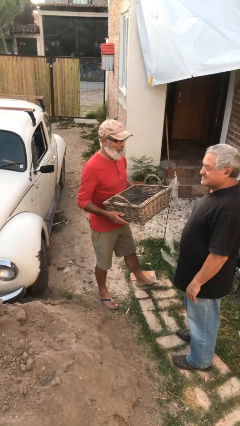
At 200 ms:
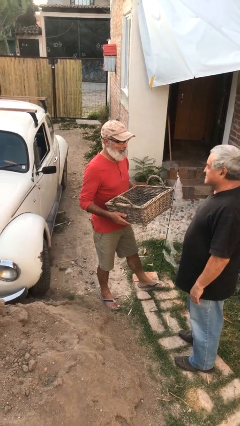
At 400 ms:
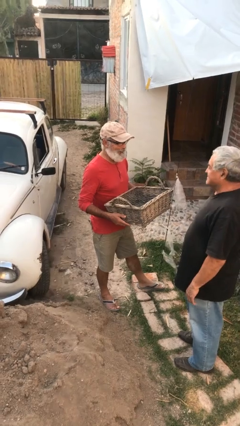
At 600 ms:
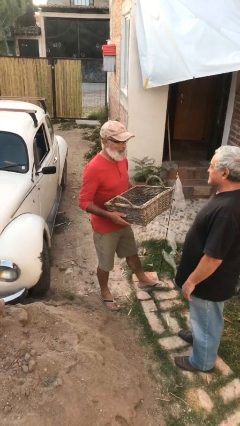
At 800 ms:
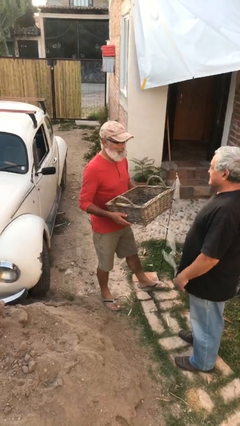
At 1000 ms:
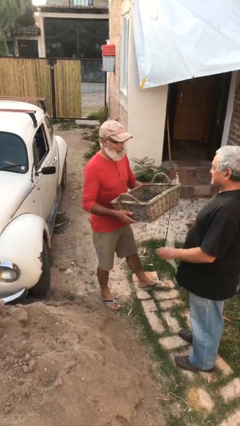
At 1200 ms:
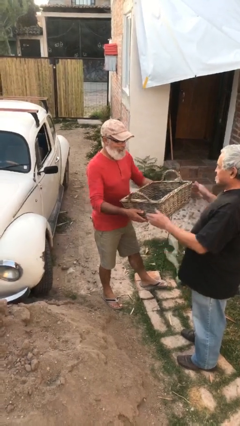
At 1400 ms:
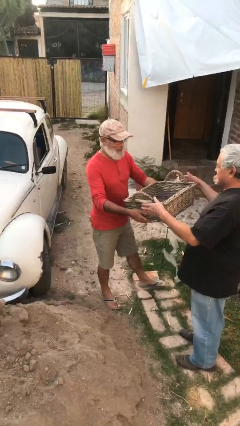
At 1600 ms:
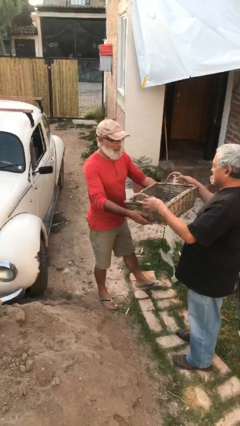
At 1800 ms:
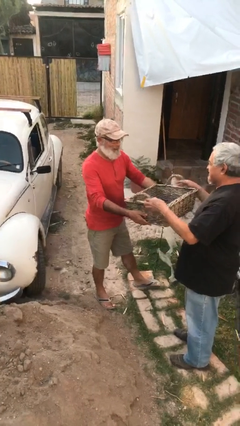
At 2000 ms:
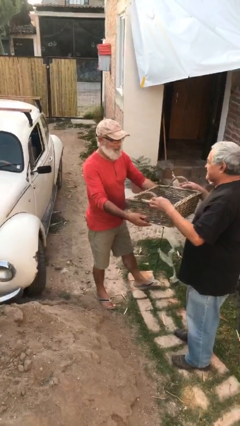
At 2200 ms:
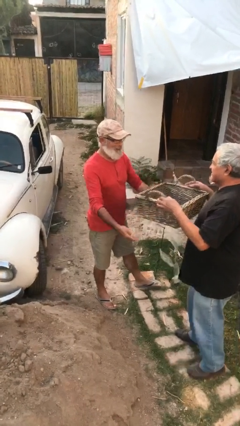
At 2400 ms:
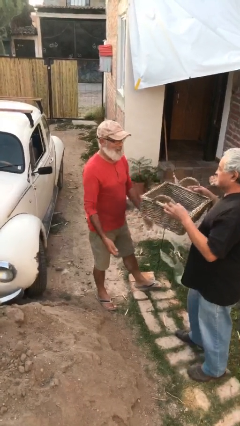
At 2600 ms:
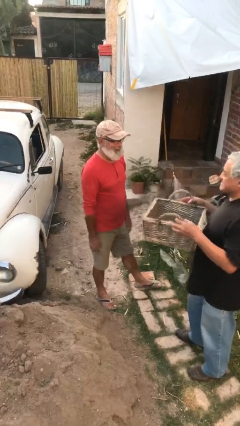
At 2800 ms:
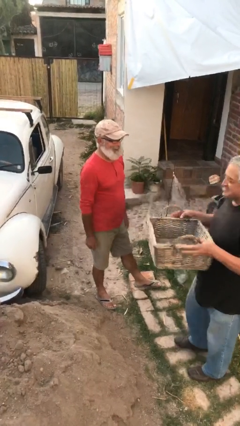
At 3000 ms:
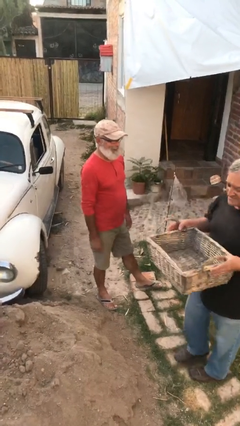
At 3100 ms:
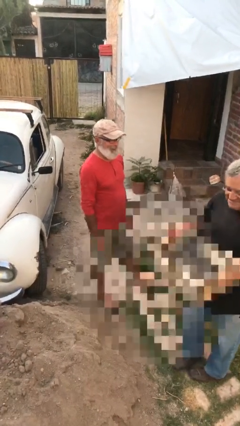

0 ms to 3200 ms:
person transfers object to person

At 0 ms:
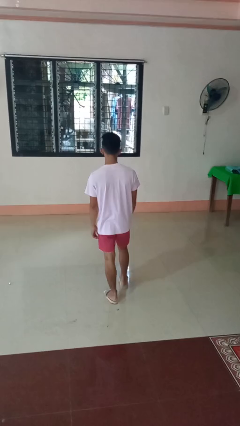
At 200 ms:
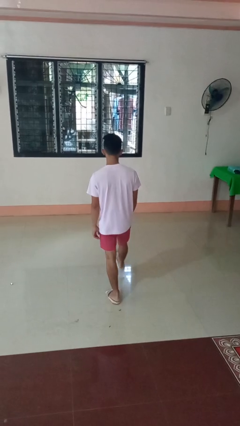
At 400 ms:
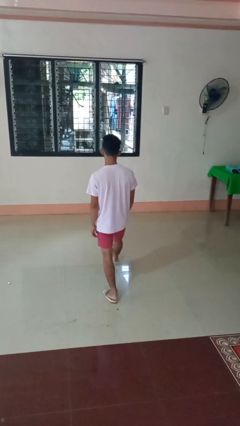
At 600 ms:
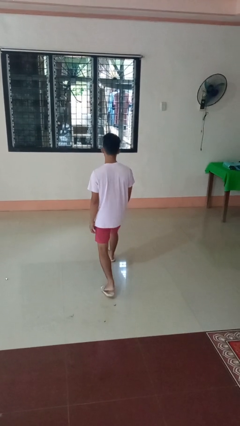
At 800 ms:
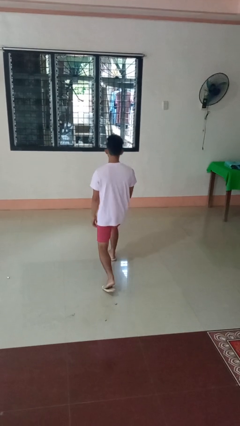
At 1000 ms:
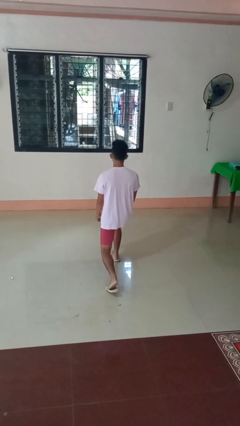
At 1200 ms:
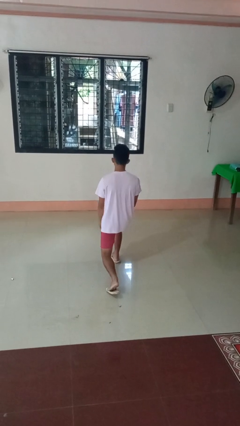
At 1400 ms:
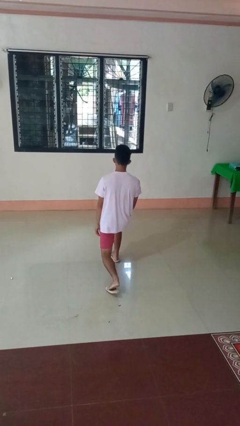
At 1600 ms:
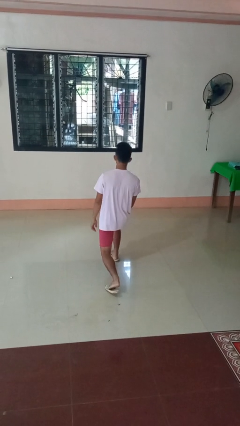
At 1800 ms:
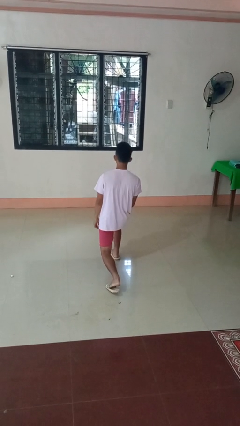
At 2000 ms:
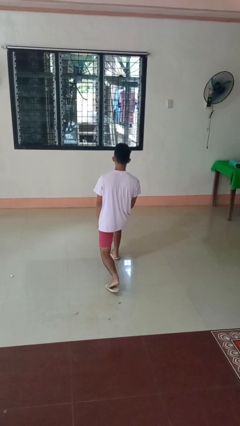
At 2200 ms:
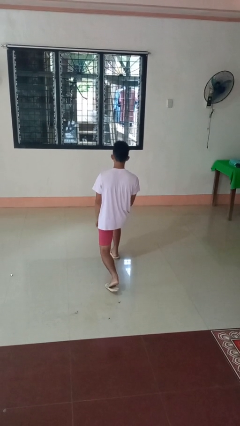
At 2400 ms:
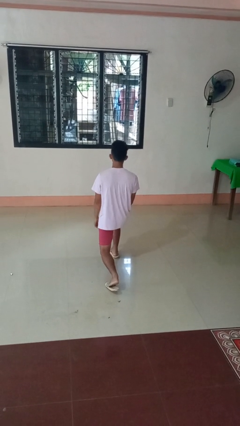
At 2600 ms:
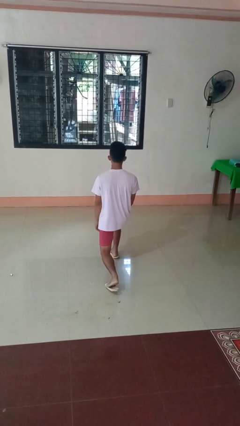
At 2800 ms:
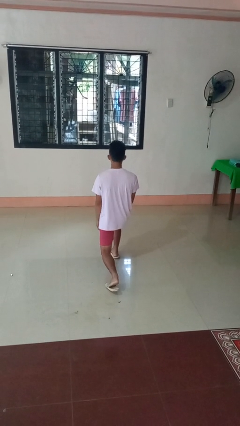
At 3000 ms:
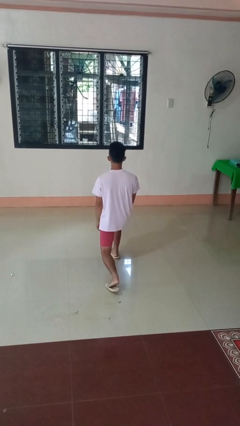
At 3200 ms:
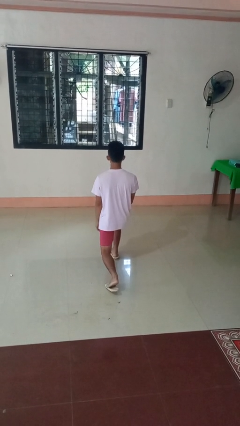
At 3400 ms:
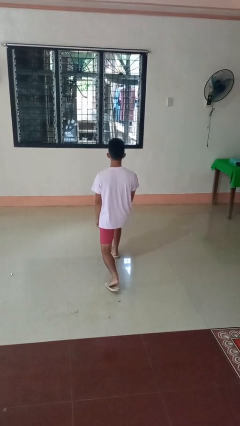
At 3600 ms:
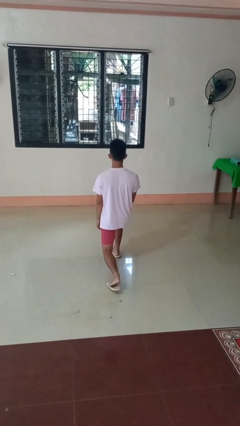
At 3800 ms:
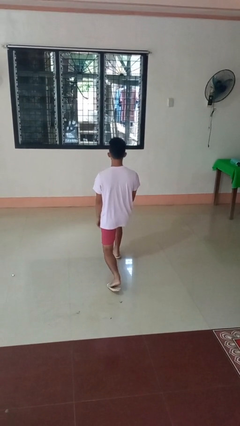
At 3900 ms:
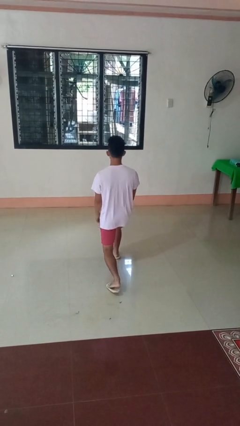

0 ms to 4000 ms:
person exercises with lunges

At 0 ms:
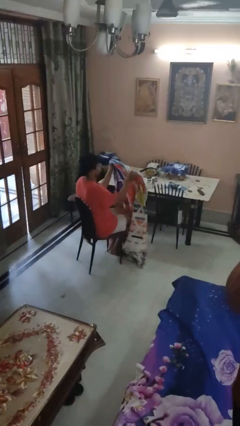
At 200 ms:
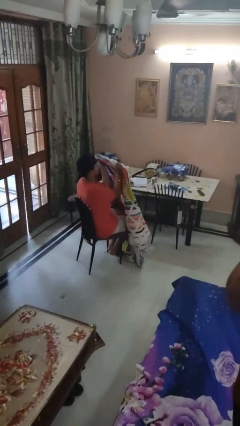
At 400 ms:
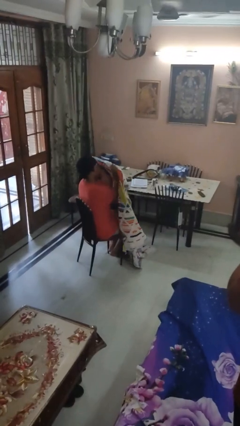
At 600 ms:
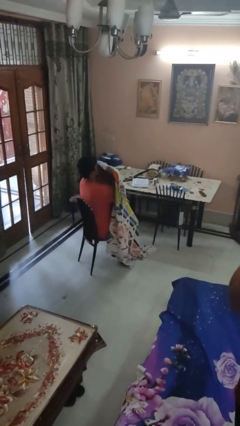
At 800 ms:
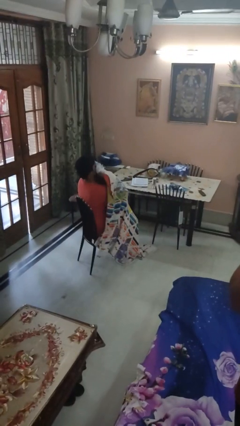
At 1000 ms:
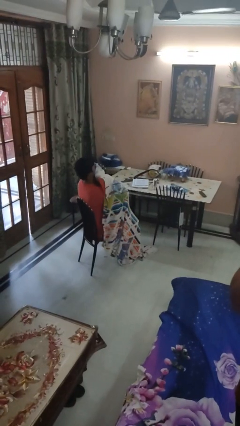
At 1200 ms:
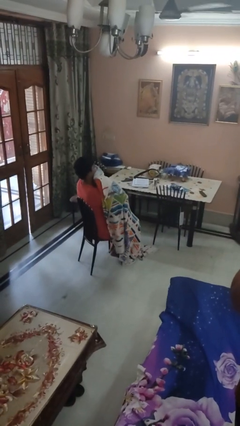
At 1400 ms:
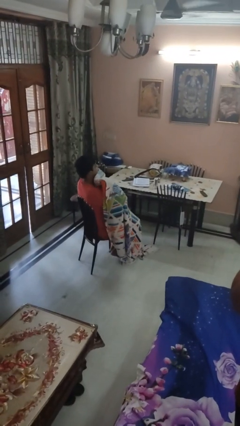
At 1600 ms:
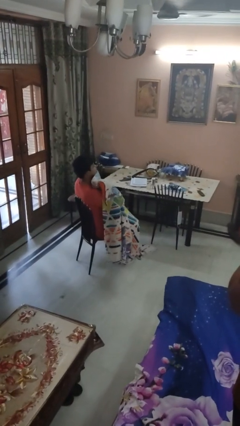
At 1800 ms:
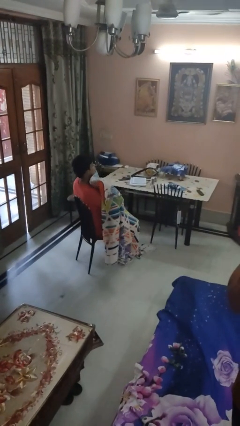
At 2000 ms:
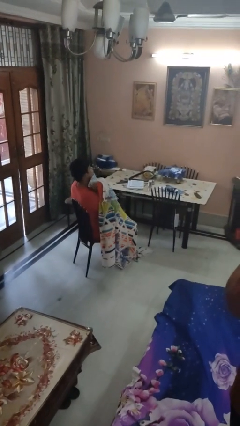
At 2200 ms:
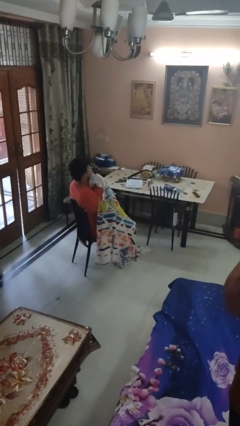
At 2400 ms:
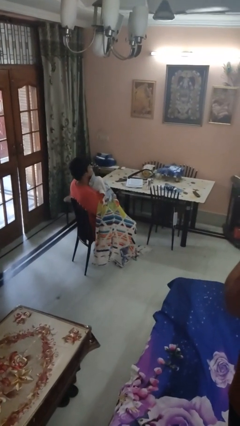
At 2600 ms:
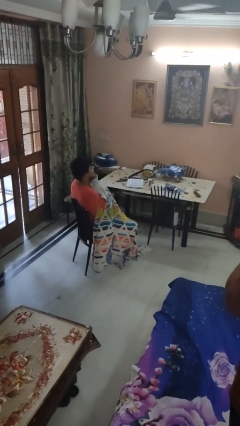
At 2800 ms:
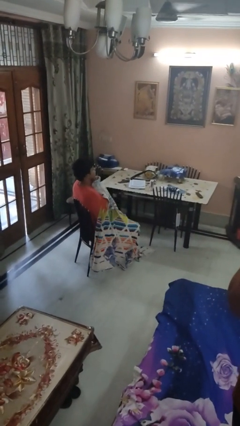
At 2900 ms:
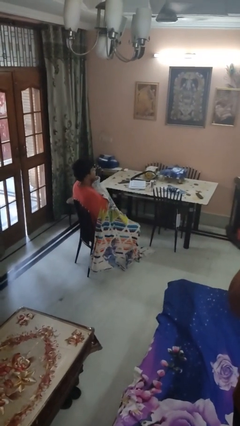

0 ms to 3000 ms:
person covers with blanket

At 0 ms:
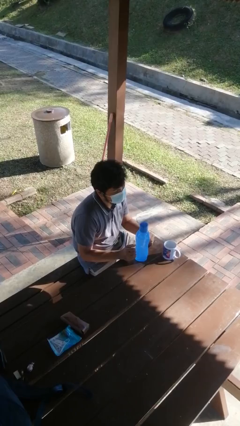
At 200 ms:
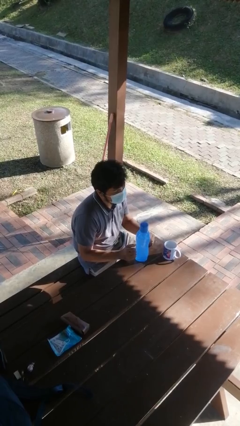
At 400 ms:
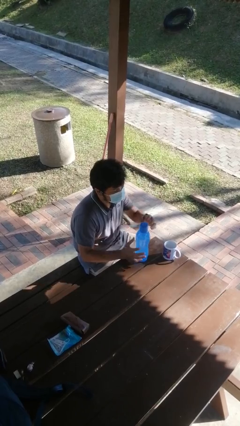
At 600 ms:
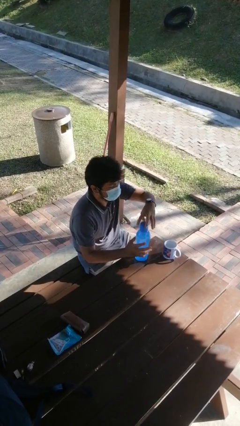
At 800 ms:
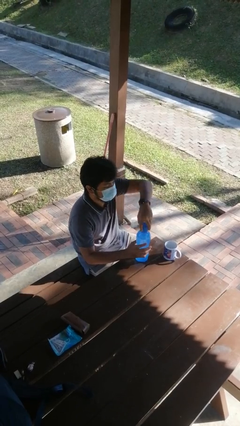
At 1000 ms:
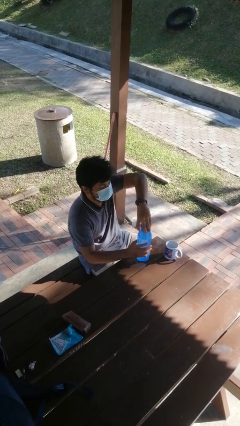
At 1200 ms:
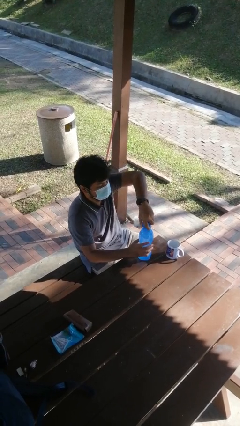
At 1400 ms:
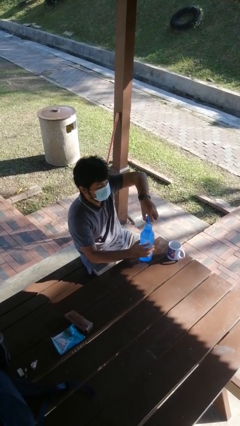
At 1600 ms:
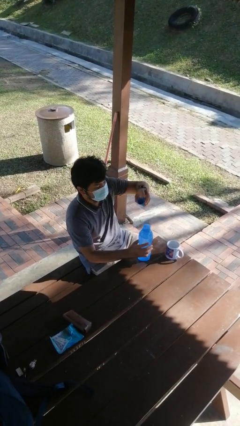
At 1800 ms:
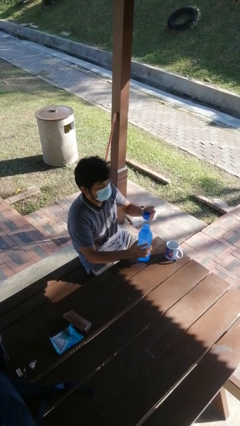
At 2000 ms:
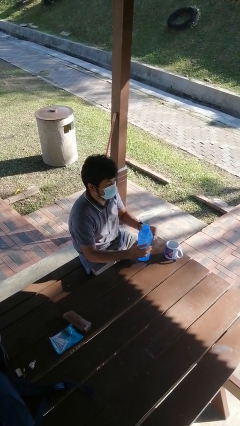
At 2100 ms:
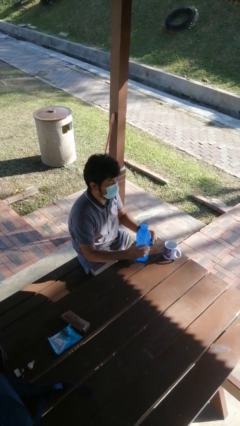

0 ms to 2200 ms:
person unscrews lid from bottle

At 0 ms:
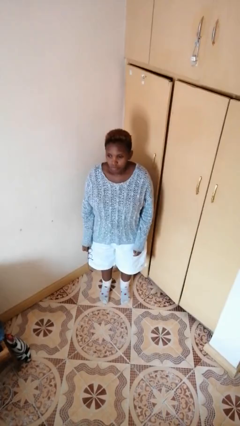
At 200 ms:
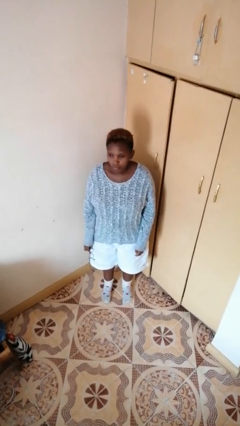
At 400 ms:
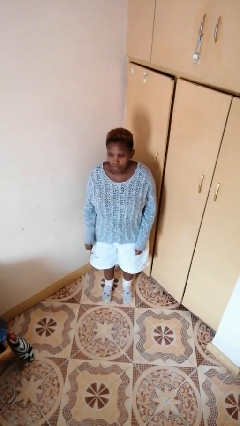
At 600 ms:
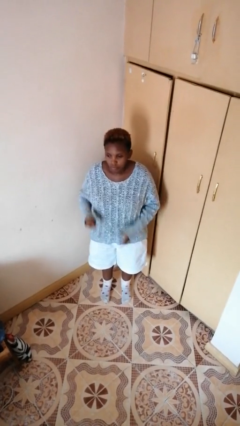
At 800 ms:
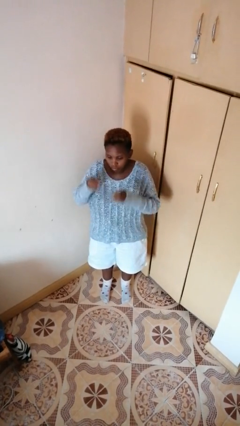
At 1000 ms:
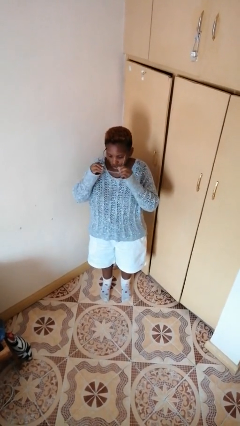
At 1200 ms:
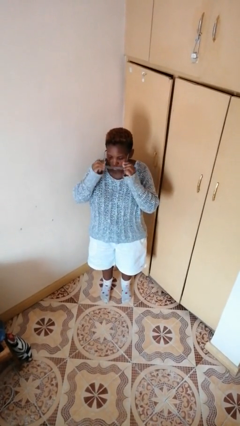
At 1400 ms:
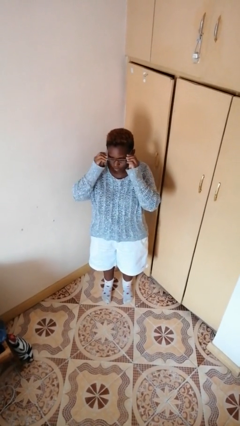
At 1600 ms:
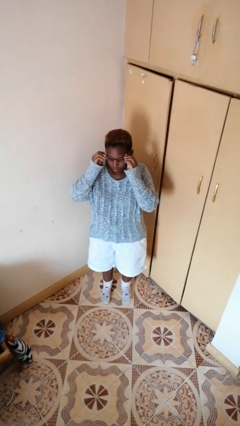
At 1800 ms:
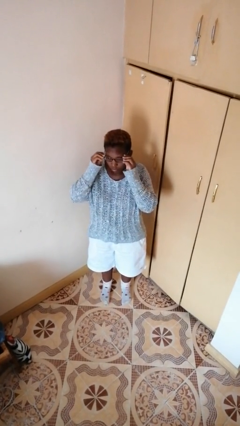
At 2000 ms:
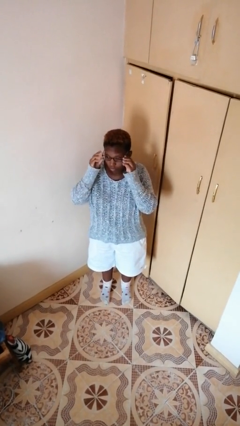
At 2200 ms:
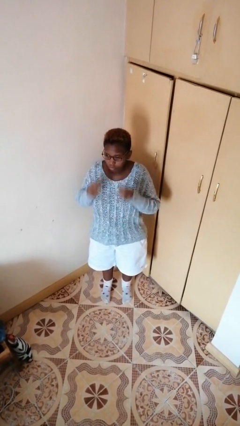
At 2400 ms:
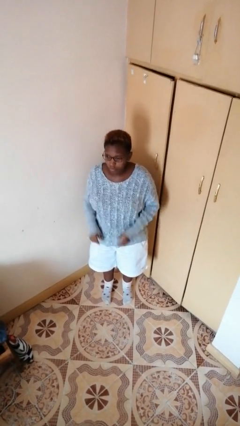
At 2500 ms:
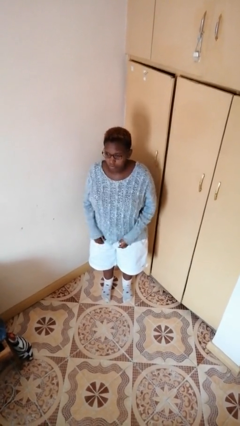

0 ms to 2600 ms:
person puts on glasses

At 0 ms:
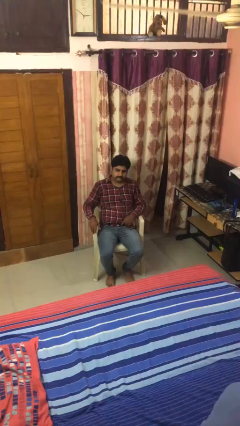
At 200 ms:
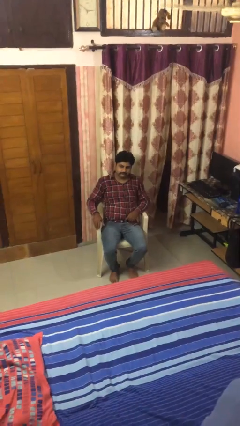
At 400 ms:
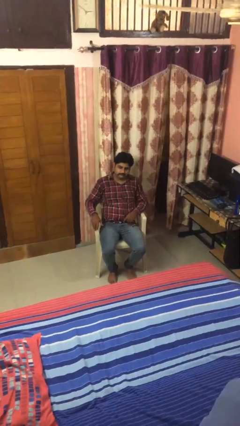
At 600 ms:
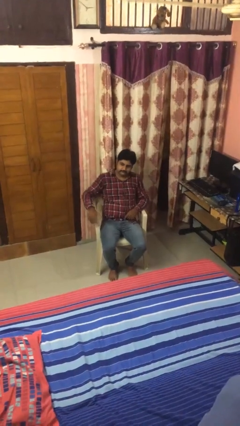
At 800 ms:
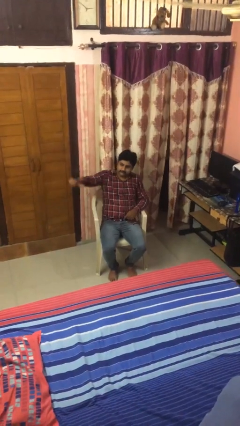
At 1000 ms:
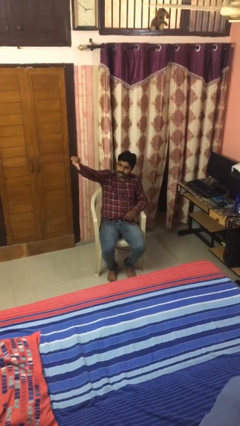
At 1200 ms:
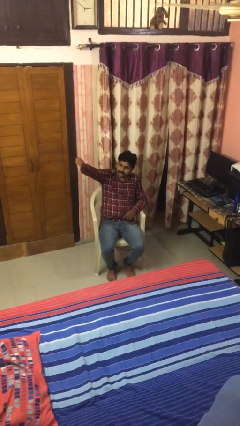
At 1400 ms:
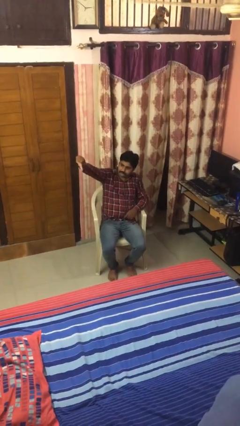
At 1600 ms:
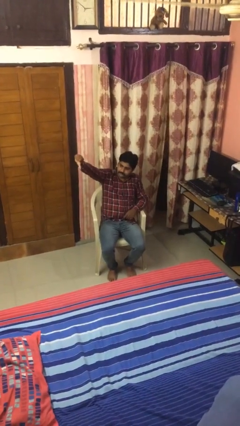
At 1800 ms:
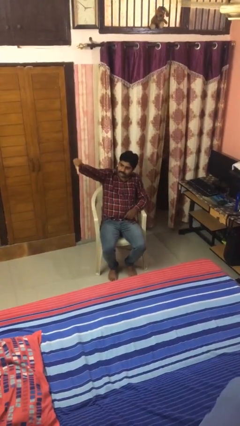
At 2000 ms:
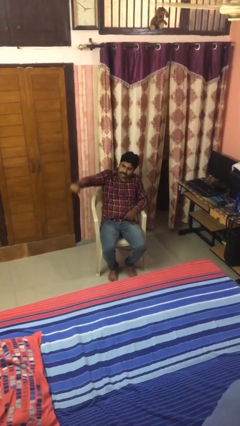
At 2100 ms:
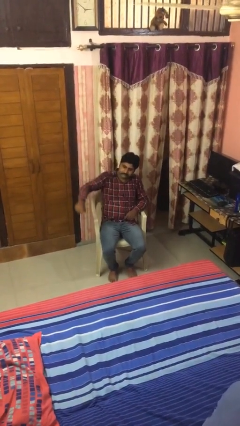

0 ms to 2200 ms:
person gestures thumbs down
